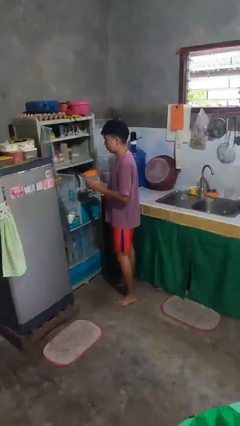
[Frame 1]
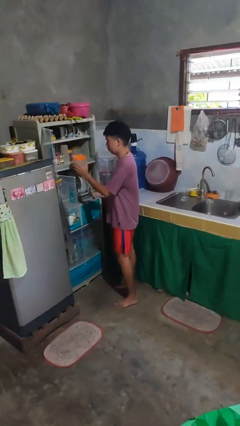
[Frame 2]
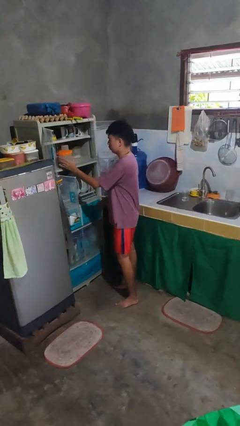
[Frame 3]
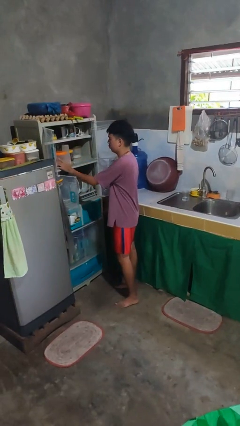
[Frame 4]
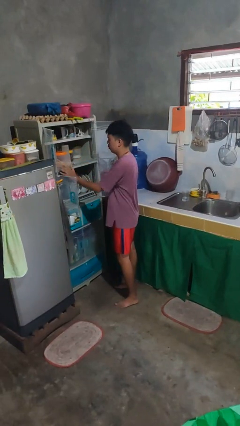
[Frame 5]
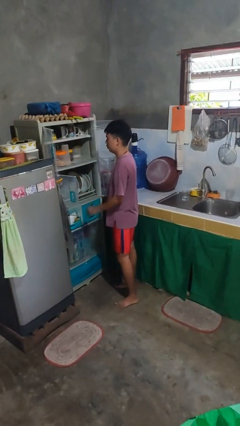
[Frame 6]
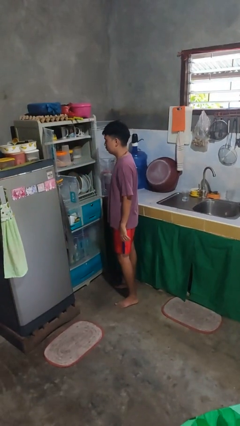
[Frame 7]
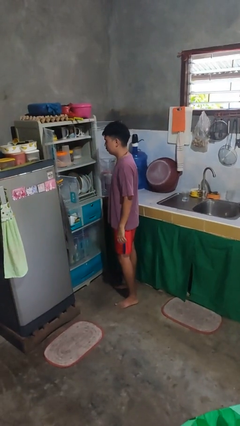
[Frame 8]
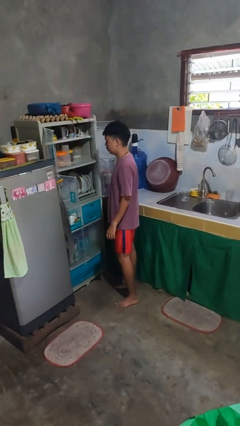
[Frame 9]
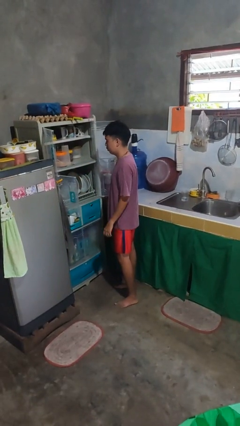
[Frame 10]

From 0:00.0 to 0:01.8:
person puts object in cabinet

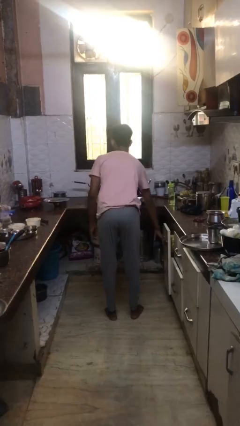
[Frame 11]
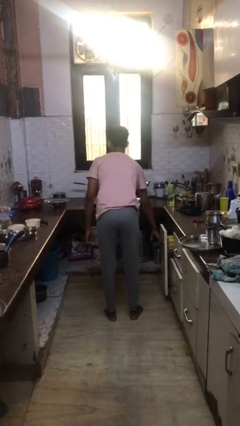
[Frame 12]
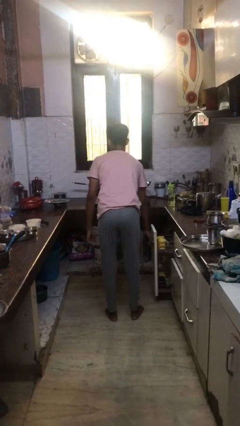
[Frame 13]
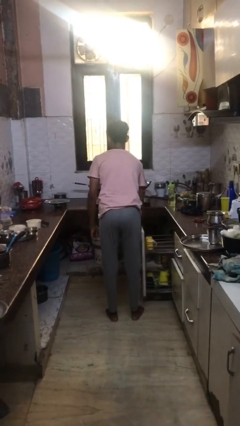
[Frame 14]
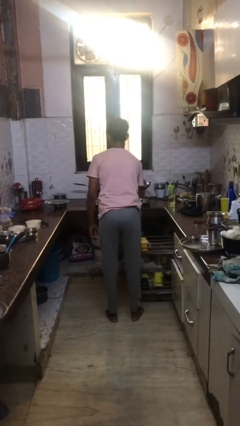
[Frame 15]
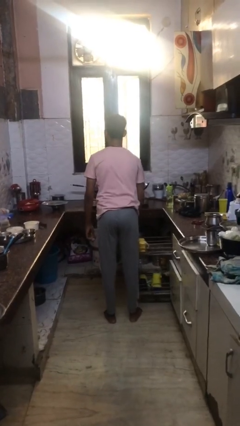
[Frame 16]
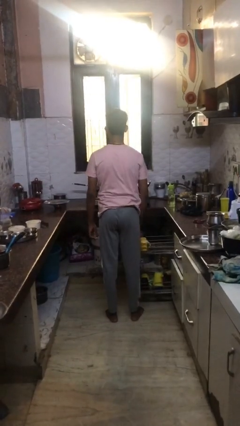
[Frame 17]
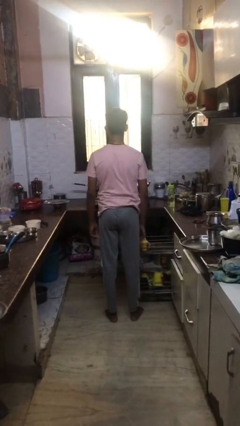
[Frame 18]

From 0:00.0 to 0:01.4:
person opens dishwasher

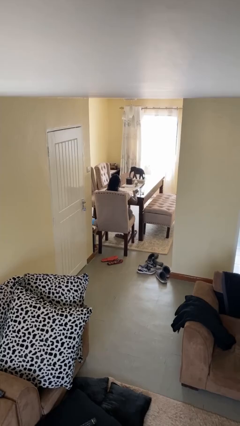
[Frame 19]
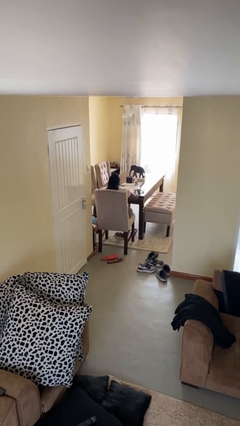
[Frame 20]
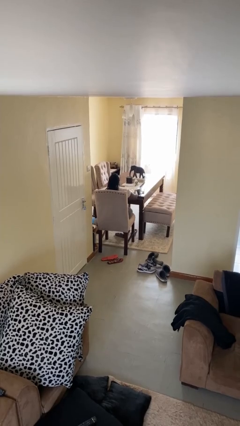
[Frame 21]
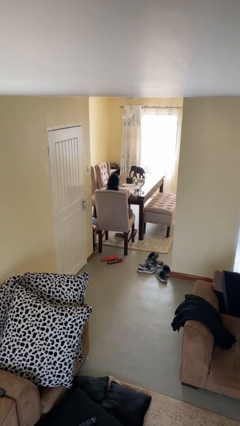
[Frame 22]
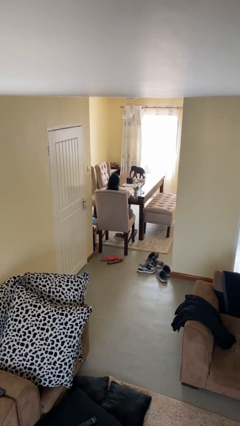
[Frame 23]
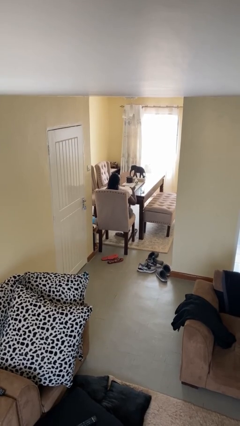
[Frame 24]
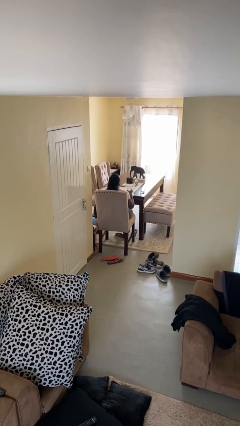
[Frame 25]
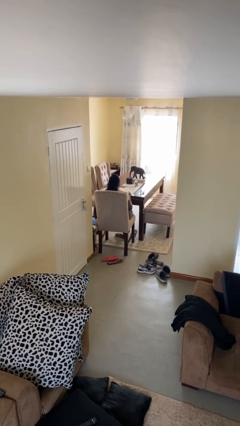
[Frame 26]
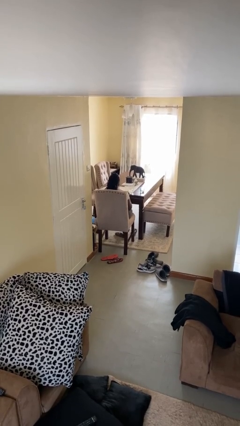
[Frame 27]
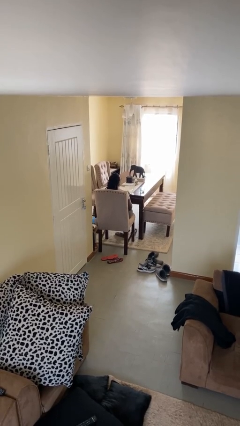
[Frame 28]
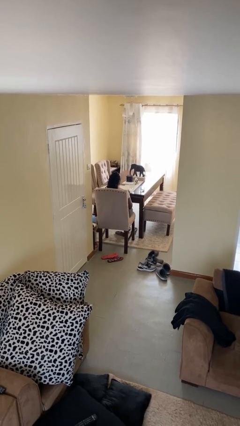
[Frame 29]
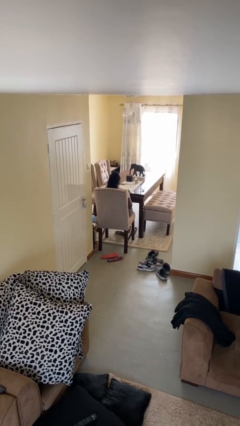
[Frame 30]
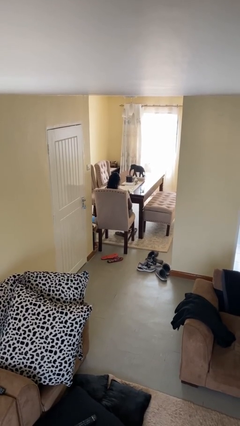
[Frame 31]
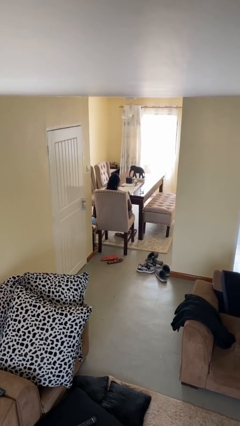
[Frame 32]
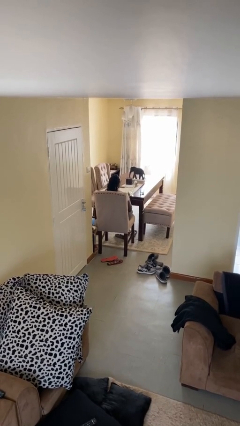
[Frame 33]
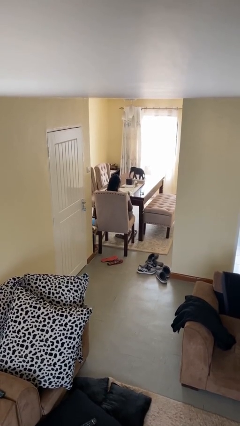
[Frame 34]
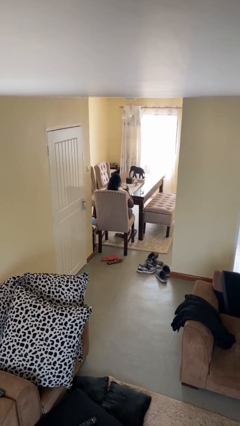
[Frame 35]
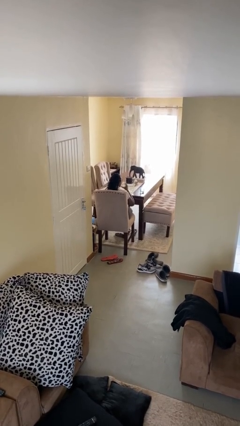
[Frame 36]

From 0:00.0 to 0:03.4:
person picks up object from table

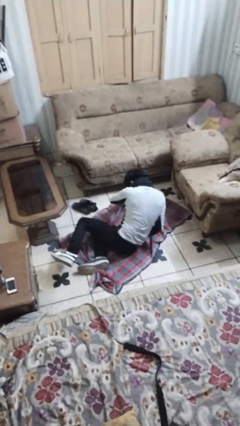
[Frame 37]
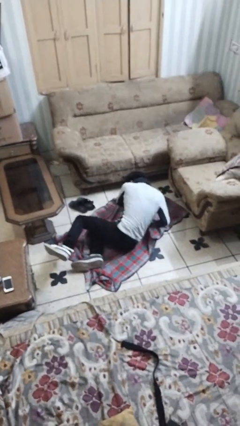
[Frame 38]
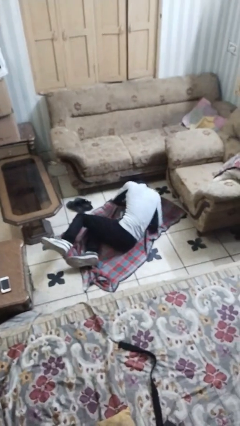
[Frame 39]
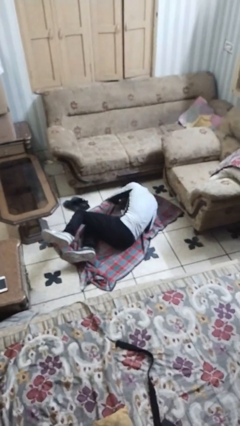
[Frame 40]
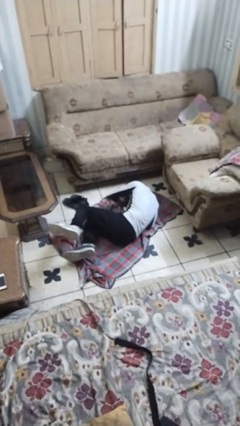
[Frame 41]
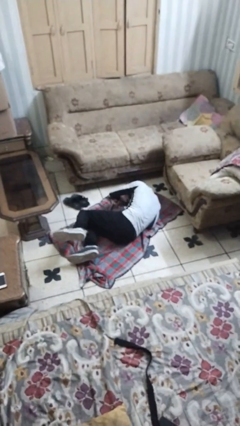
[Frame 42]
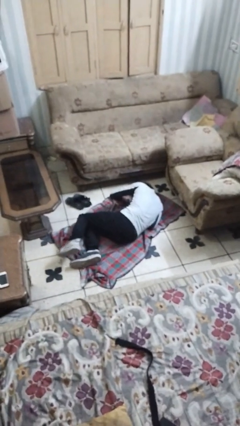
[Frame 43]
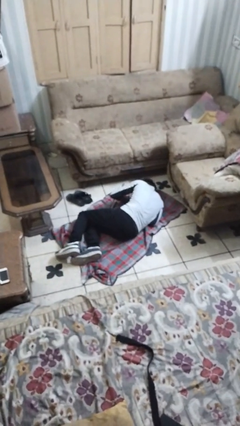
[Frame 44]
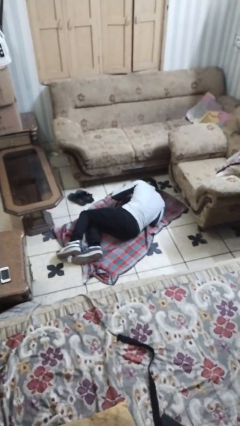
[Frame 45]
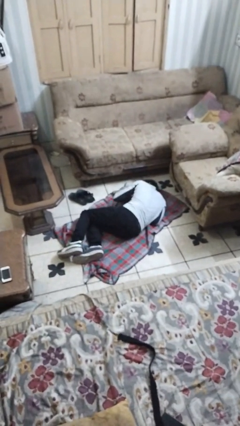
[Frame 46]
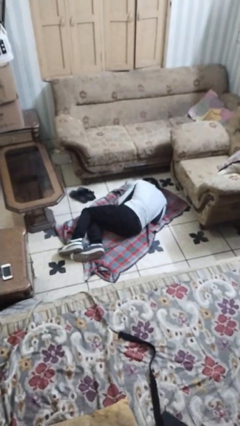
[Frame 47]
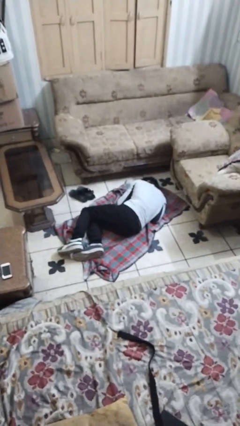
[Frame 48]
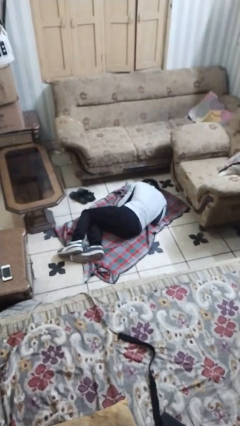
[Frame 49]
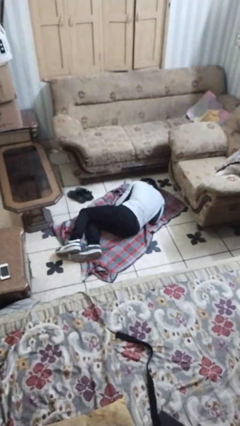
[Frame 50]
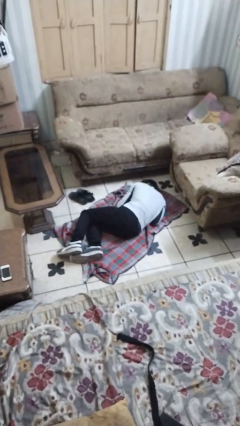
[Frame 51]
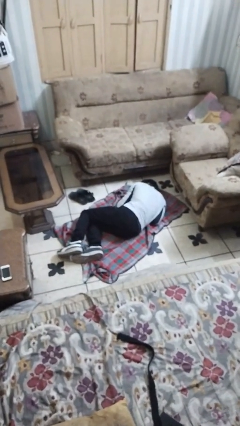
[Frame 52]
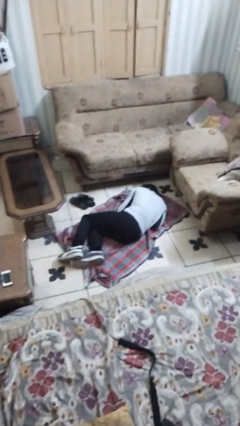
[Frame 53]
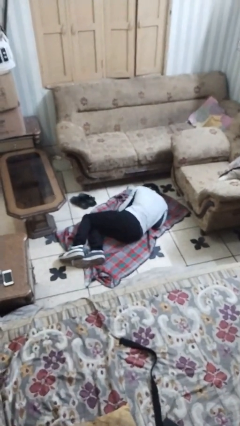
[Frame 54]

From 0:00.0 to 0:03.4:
person lies down on floor

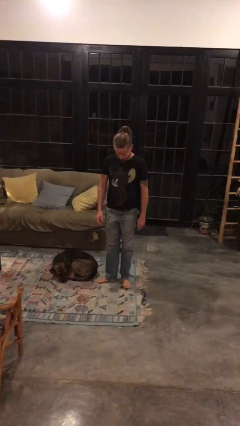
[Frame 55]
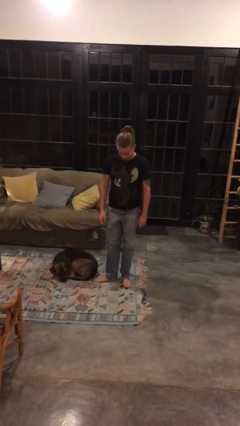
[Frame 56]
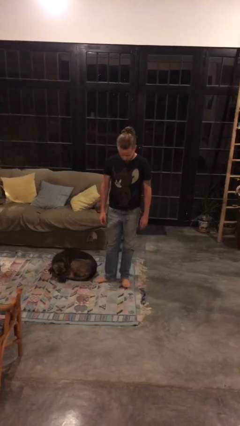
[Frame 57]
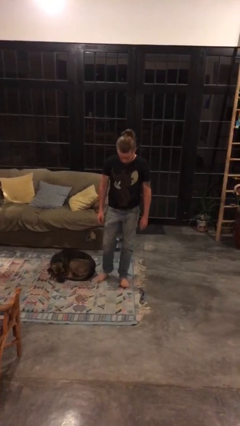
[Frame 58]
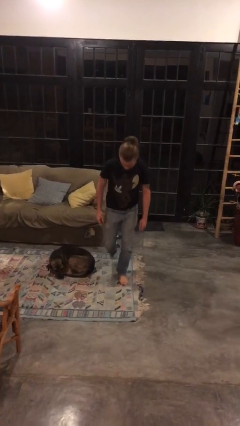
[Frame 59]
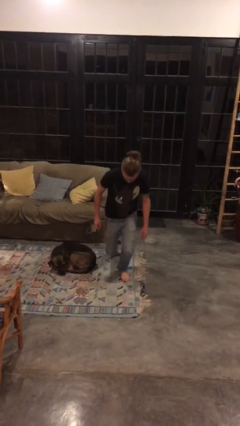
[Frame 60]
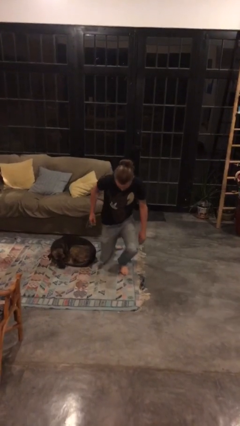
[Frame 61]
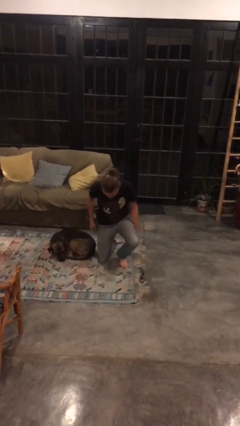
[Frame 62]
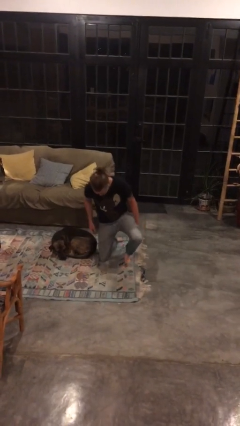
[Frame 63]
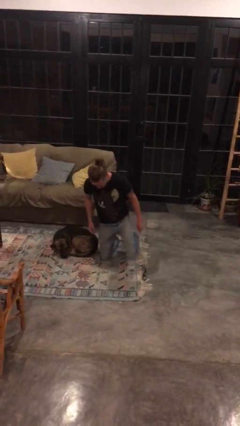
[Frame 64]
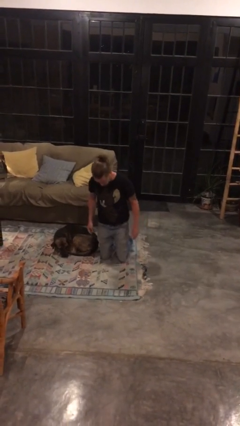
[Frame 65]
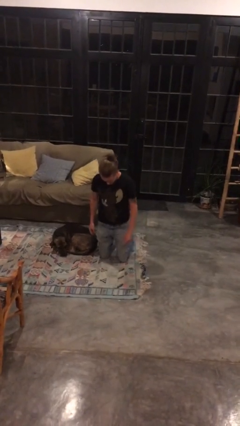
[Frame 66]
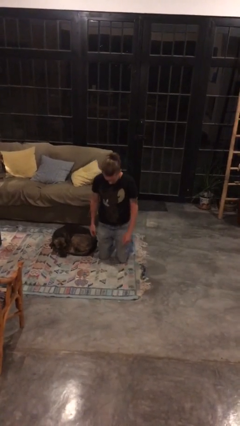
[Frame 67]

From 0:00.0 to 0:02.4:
person kneels

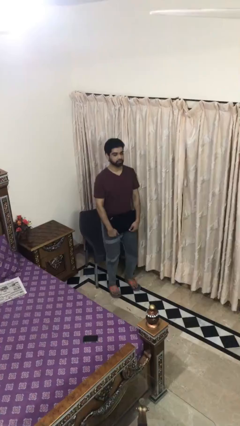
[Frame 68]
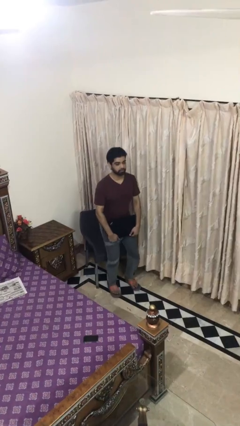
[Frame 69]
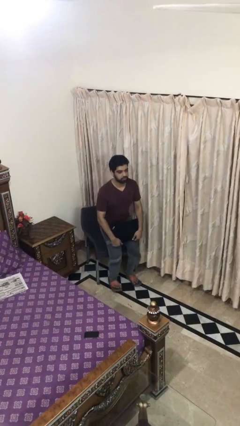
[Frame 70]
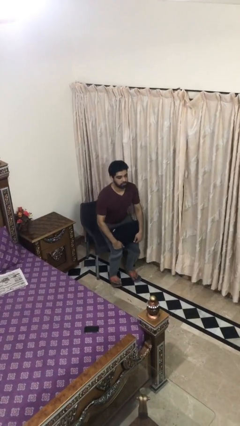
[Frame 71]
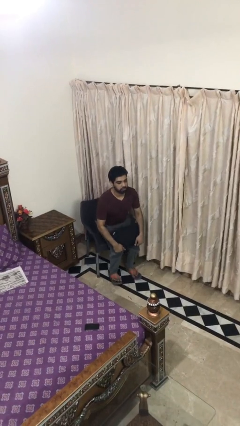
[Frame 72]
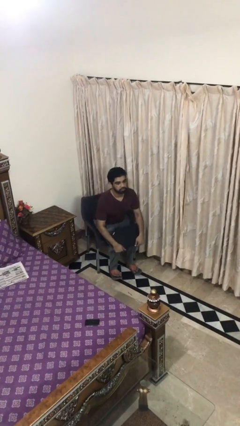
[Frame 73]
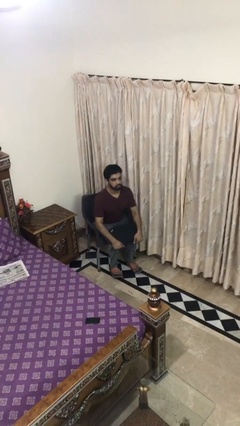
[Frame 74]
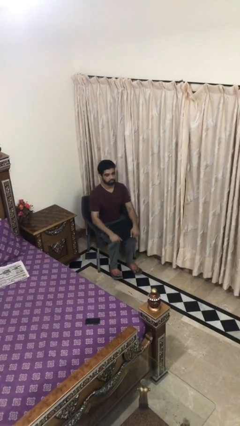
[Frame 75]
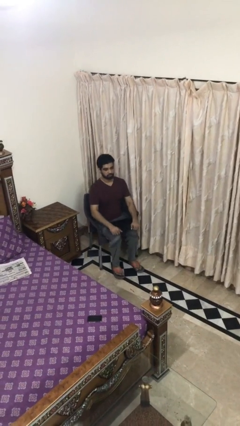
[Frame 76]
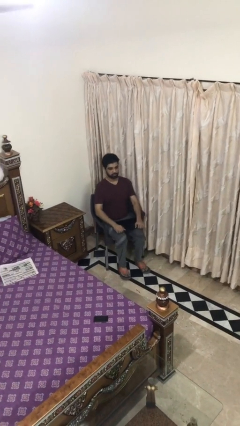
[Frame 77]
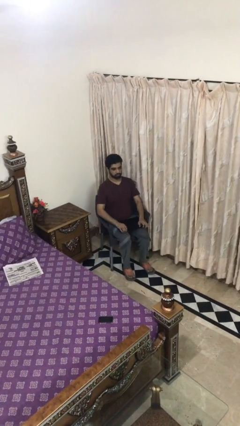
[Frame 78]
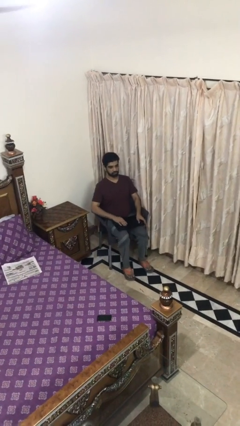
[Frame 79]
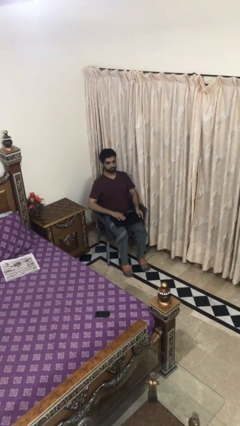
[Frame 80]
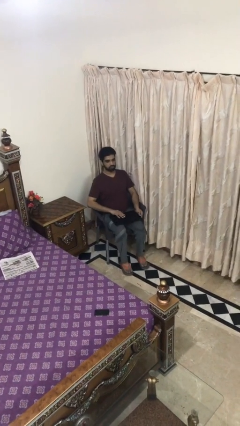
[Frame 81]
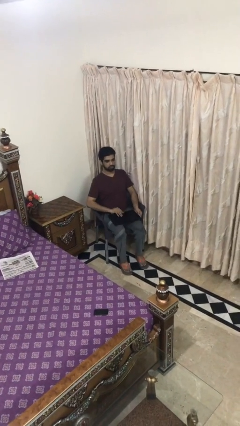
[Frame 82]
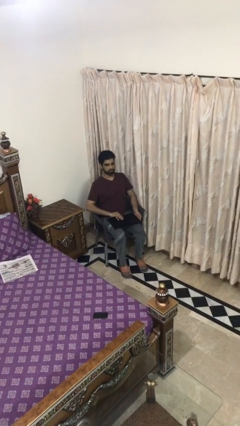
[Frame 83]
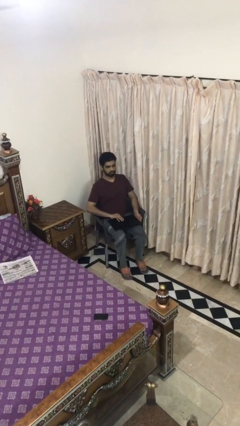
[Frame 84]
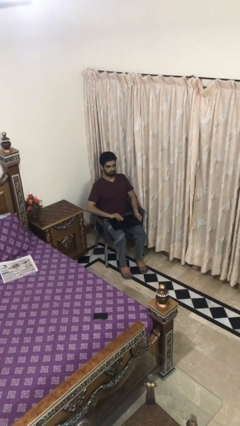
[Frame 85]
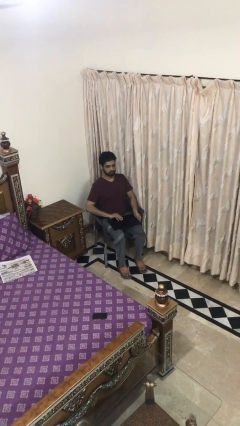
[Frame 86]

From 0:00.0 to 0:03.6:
person sits down

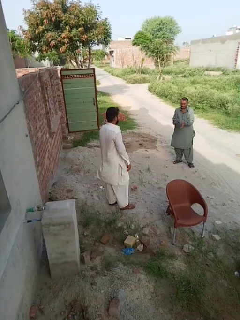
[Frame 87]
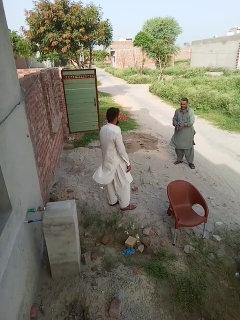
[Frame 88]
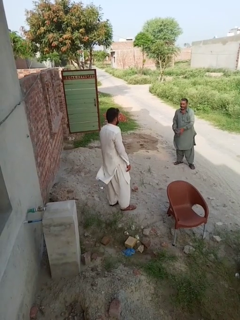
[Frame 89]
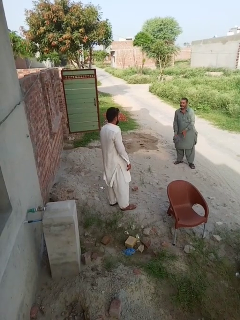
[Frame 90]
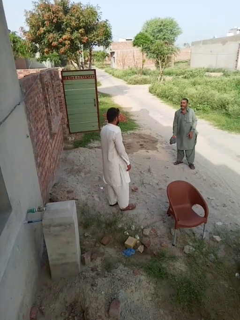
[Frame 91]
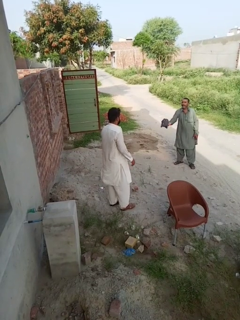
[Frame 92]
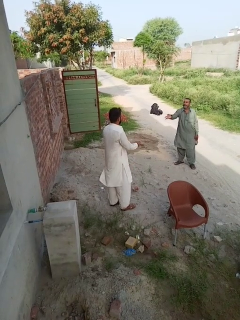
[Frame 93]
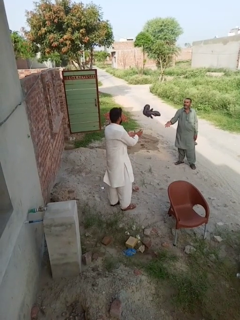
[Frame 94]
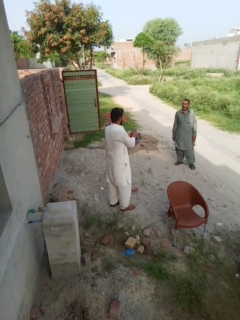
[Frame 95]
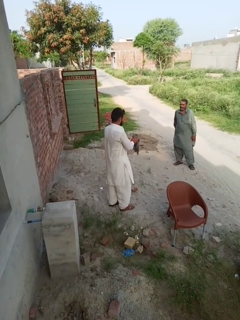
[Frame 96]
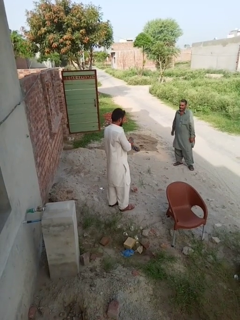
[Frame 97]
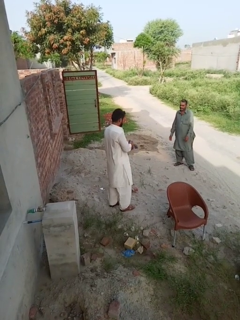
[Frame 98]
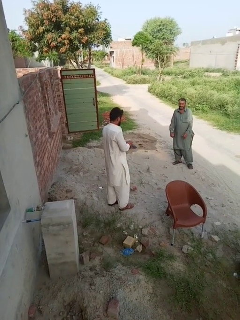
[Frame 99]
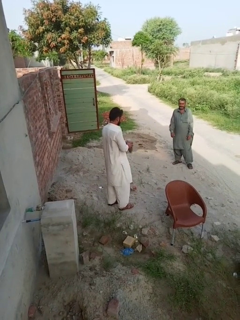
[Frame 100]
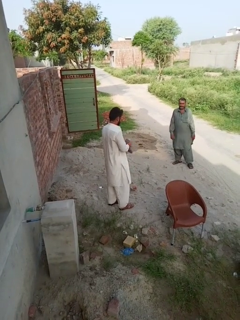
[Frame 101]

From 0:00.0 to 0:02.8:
person catches object from person
